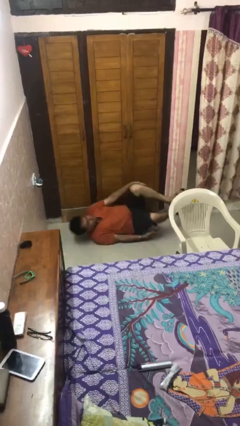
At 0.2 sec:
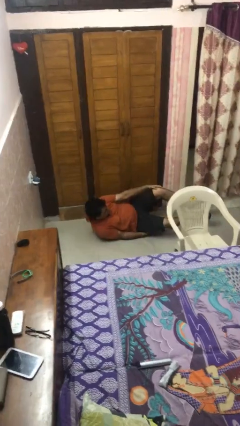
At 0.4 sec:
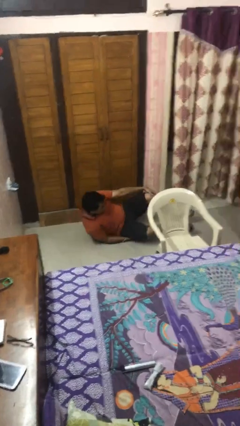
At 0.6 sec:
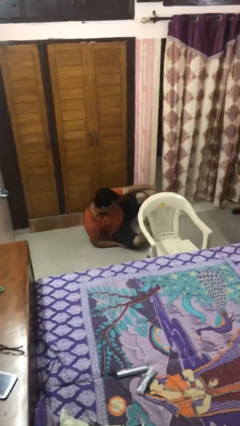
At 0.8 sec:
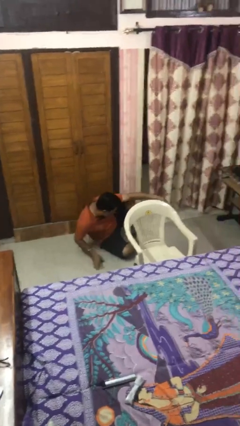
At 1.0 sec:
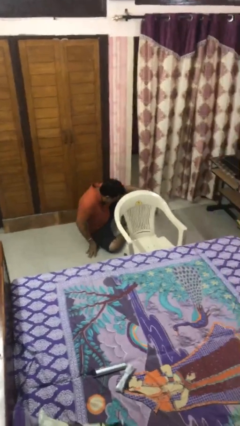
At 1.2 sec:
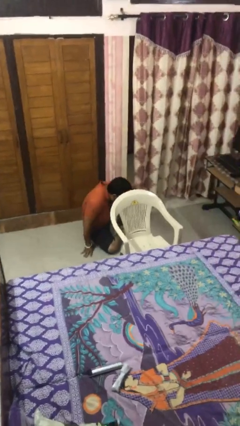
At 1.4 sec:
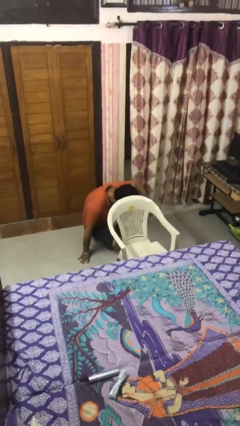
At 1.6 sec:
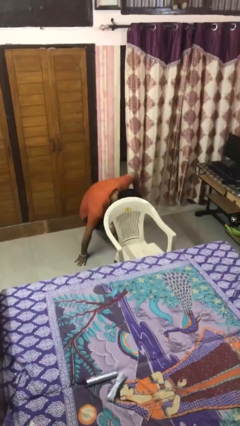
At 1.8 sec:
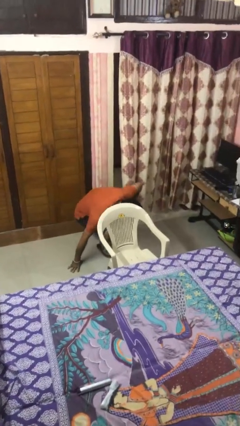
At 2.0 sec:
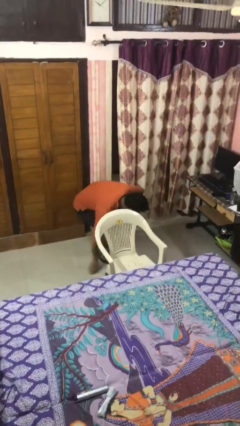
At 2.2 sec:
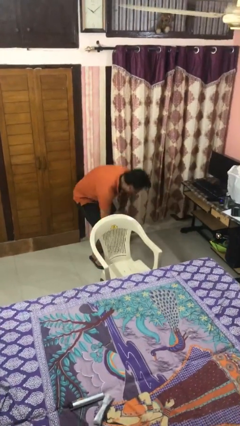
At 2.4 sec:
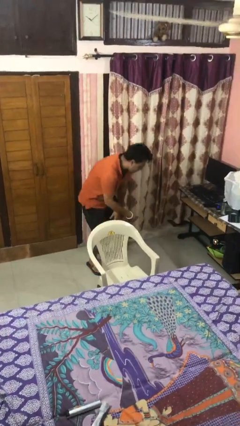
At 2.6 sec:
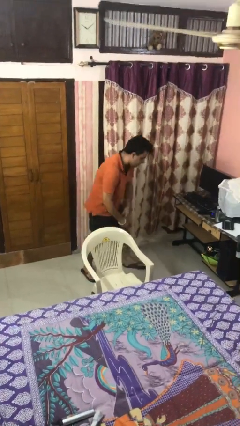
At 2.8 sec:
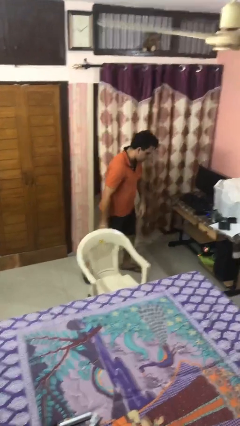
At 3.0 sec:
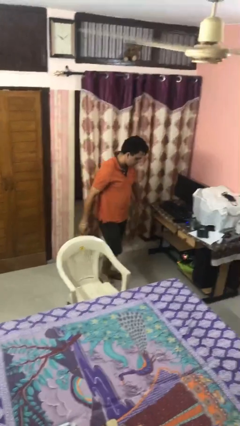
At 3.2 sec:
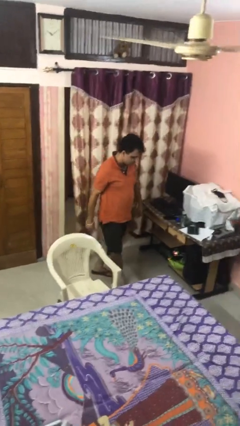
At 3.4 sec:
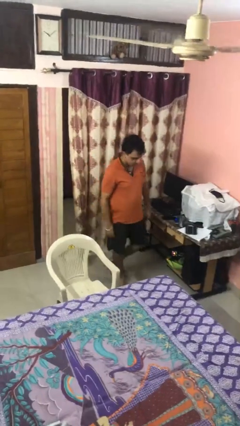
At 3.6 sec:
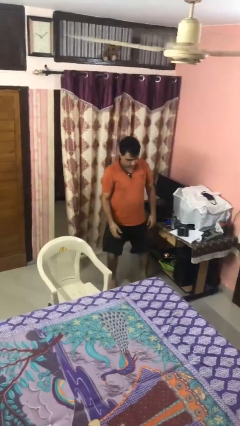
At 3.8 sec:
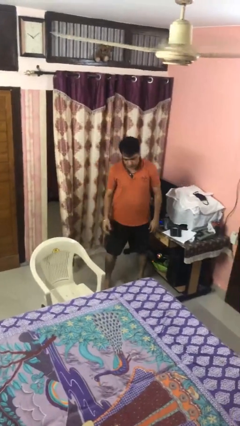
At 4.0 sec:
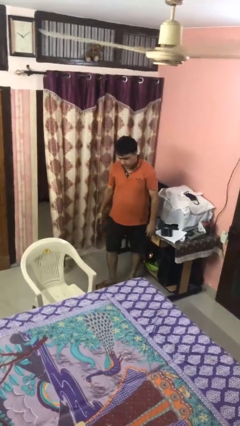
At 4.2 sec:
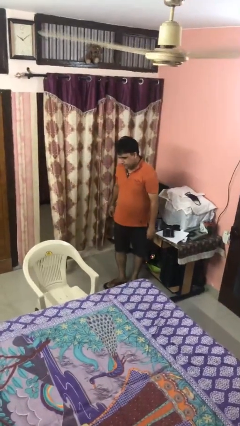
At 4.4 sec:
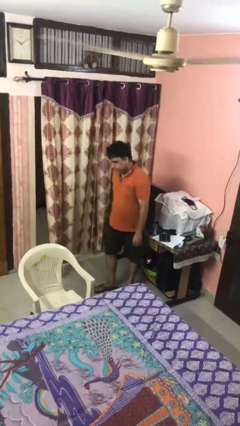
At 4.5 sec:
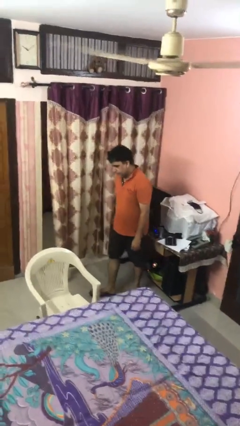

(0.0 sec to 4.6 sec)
person stands up from floor

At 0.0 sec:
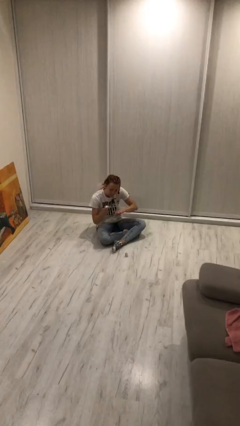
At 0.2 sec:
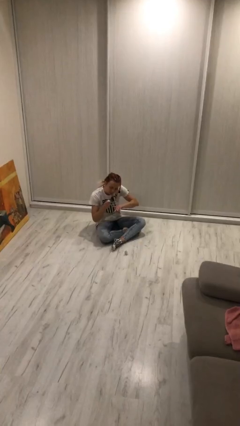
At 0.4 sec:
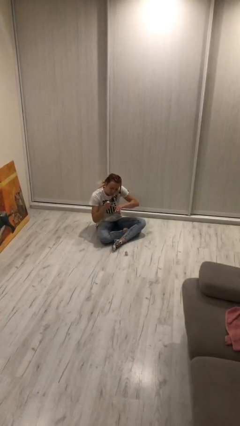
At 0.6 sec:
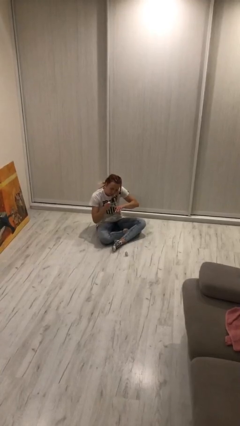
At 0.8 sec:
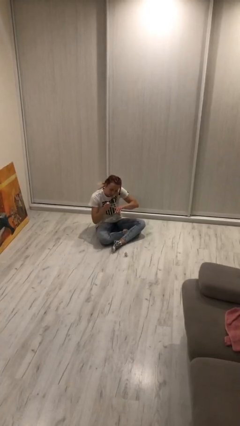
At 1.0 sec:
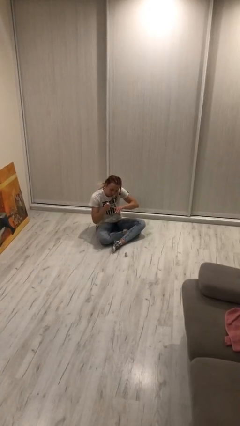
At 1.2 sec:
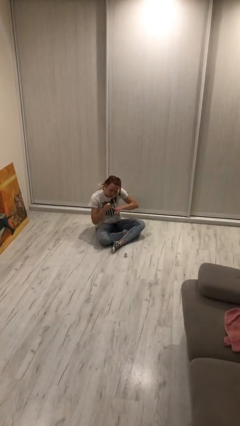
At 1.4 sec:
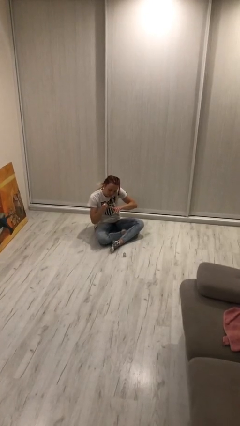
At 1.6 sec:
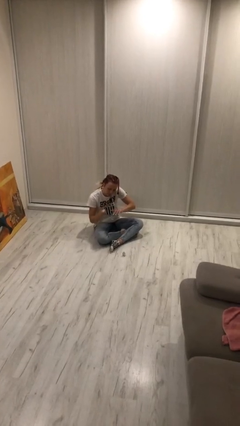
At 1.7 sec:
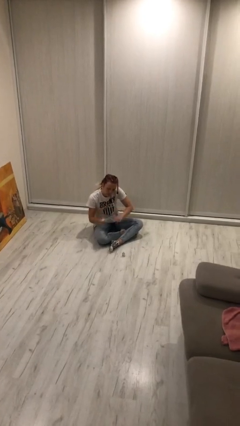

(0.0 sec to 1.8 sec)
person paints fingernails

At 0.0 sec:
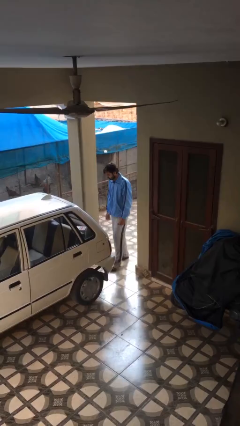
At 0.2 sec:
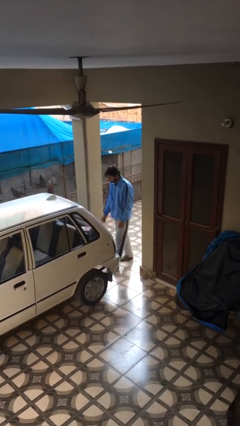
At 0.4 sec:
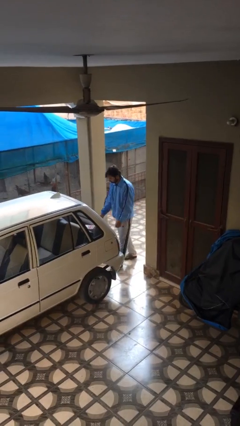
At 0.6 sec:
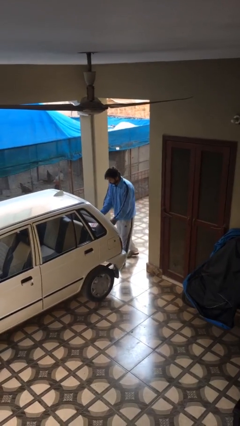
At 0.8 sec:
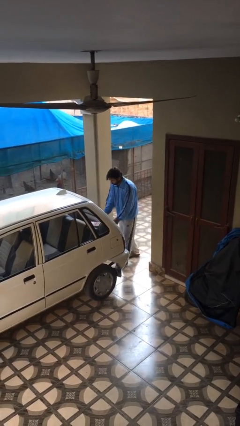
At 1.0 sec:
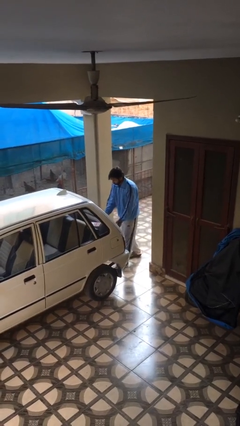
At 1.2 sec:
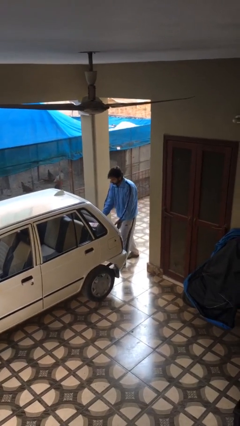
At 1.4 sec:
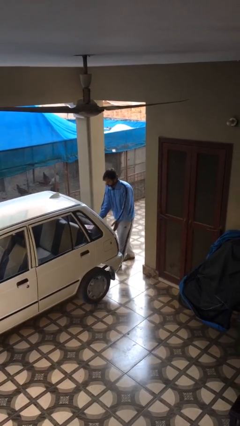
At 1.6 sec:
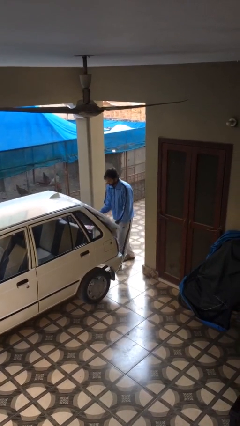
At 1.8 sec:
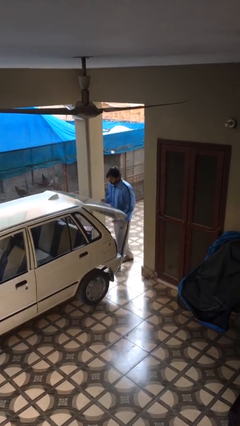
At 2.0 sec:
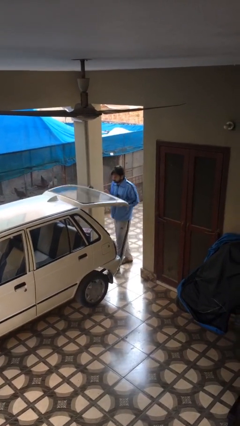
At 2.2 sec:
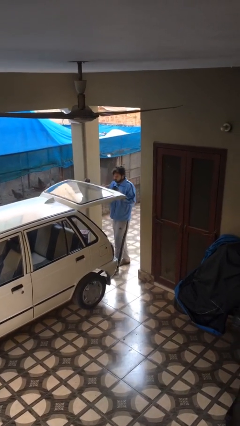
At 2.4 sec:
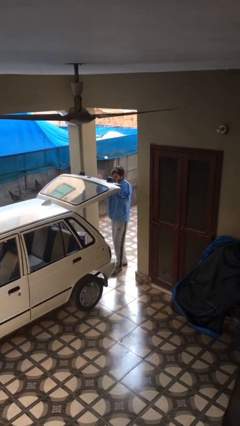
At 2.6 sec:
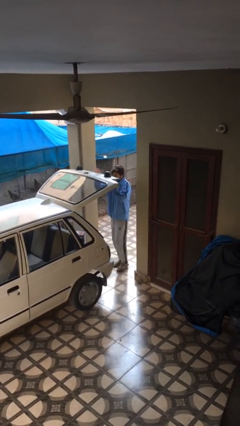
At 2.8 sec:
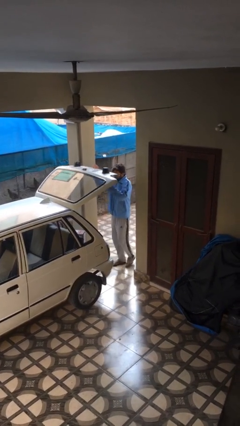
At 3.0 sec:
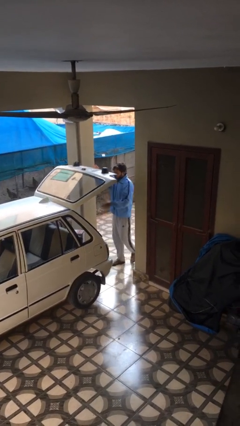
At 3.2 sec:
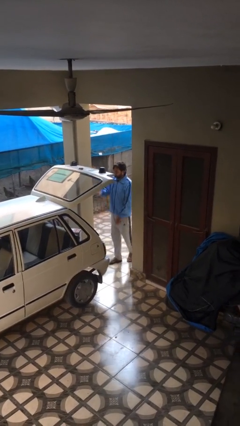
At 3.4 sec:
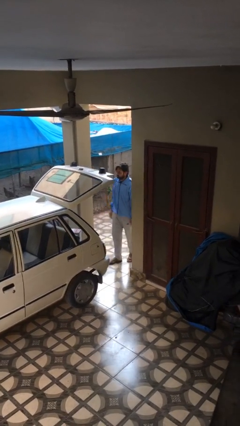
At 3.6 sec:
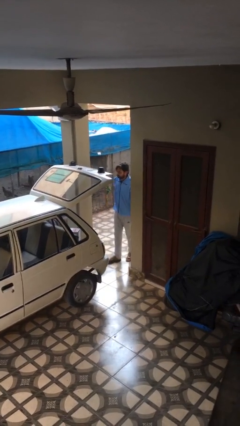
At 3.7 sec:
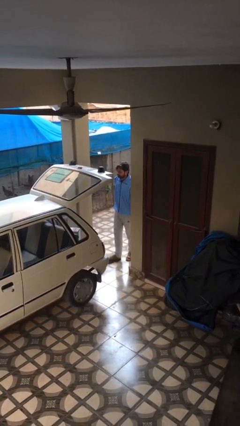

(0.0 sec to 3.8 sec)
person opens car trunk

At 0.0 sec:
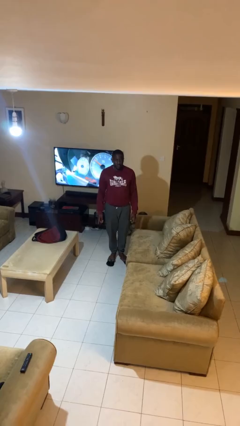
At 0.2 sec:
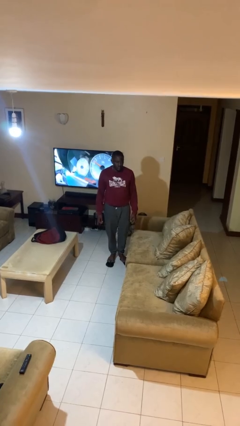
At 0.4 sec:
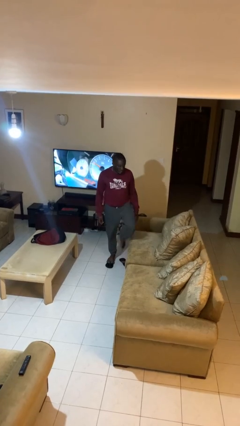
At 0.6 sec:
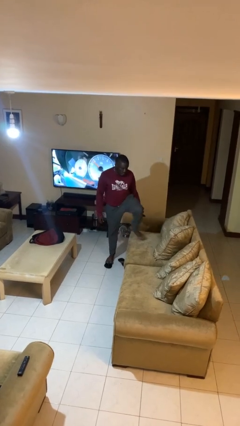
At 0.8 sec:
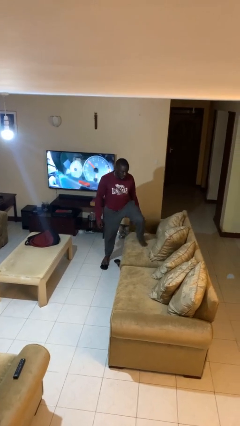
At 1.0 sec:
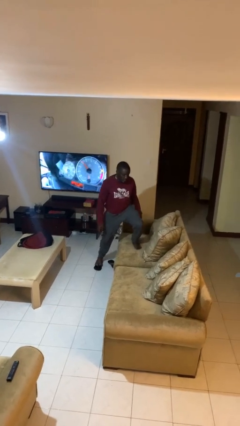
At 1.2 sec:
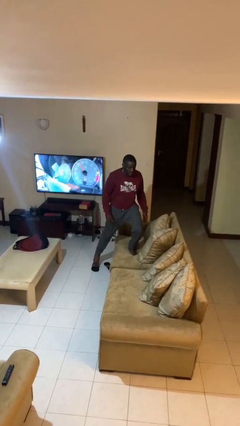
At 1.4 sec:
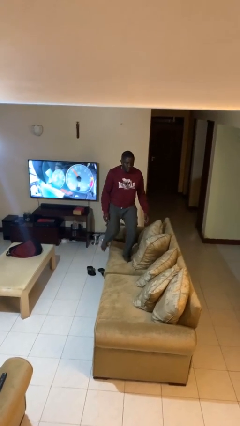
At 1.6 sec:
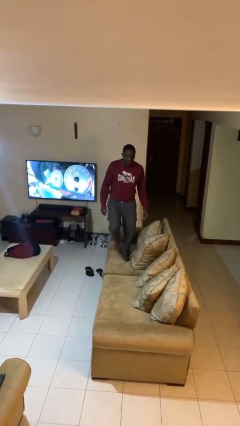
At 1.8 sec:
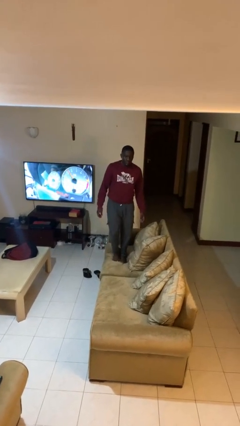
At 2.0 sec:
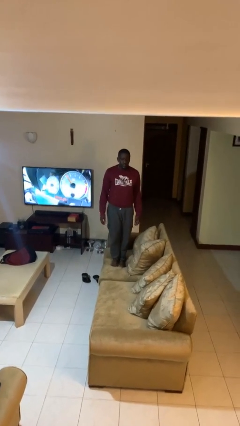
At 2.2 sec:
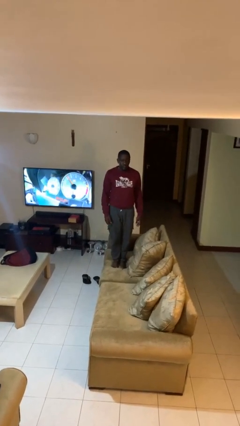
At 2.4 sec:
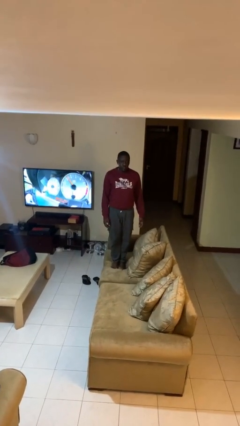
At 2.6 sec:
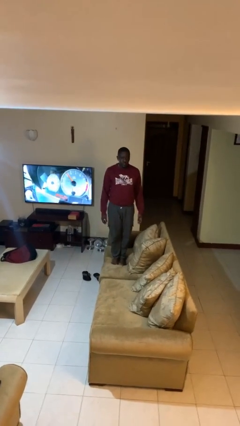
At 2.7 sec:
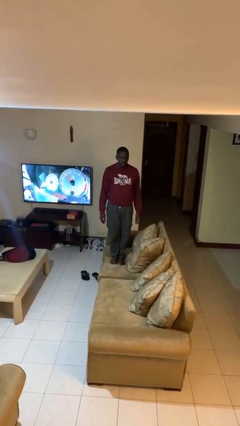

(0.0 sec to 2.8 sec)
person climbs on couch

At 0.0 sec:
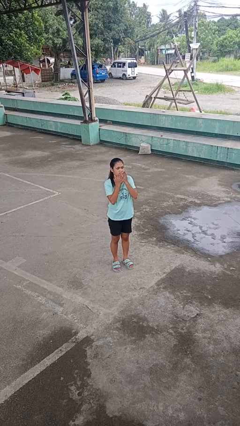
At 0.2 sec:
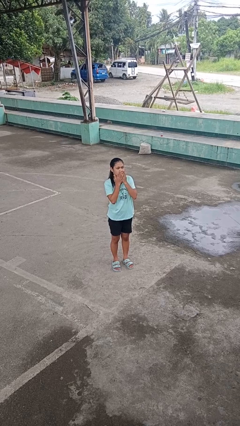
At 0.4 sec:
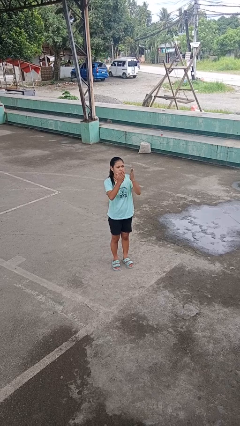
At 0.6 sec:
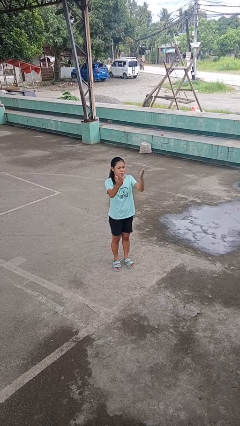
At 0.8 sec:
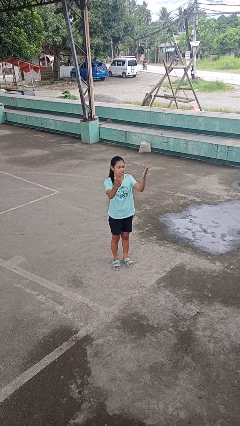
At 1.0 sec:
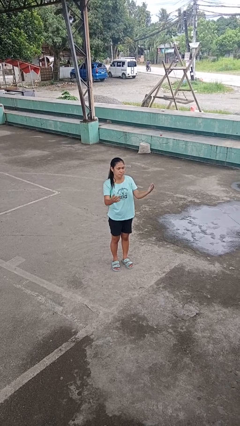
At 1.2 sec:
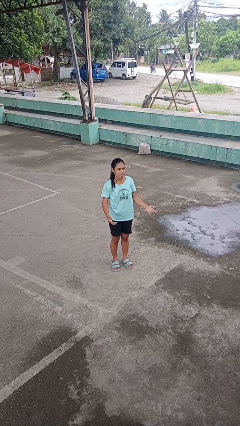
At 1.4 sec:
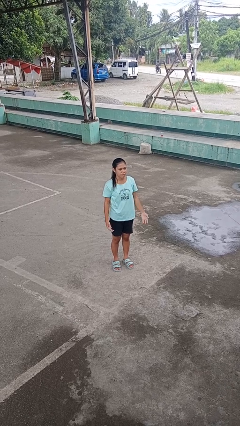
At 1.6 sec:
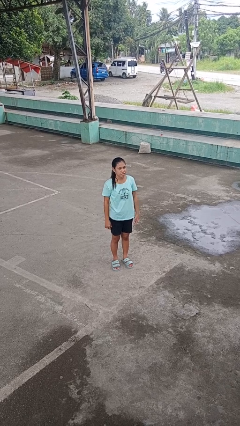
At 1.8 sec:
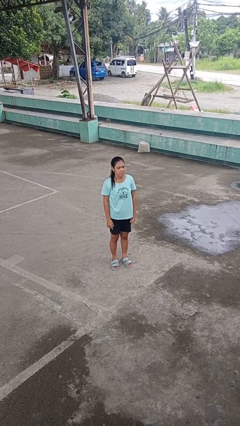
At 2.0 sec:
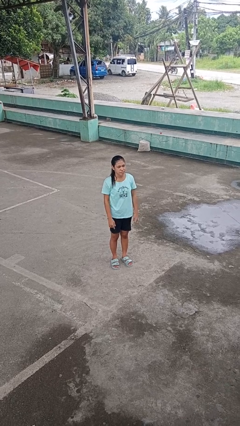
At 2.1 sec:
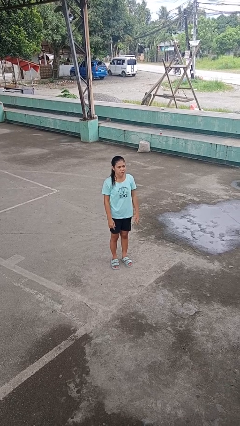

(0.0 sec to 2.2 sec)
person gestures blow kiss

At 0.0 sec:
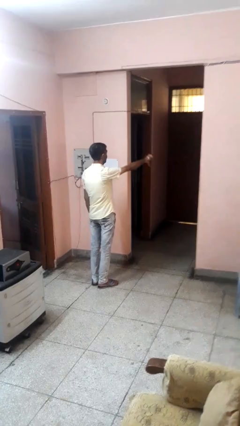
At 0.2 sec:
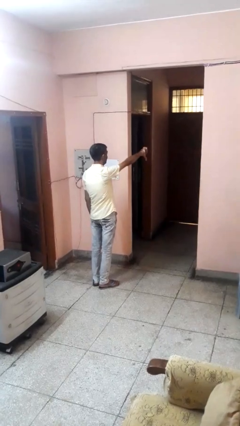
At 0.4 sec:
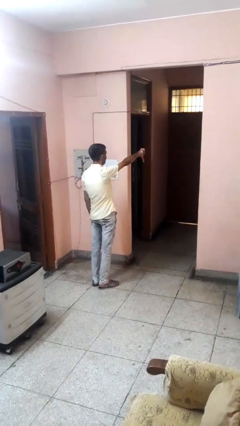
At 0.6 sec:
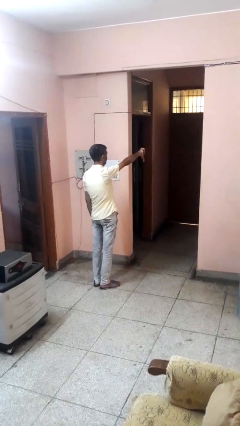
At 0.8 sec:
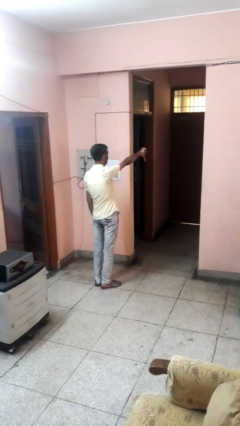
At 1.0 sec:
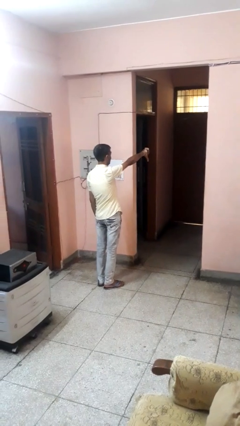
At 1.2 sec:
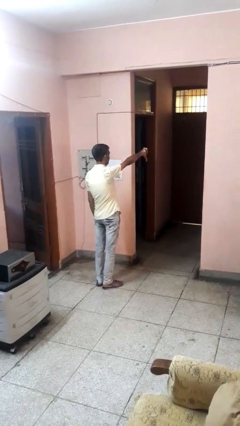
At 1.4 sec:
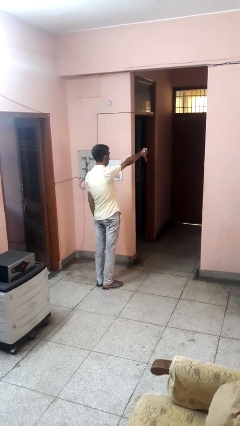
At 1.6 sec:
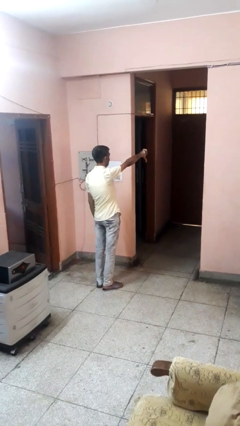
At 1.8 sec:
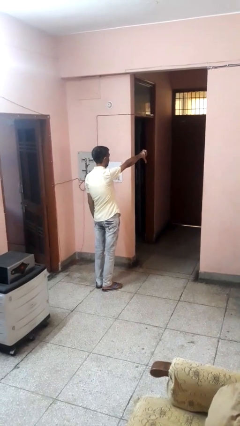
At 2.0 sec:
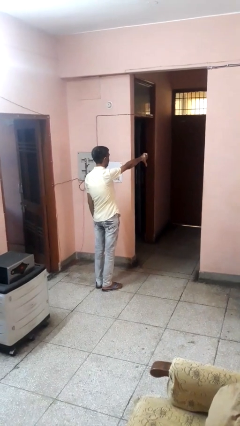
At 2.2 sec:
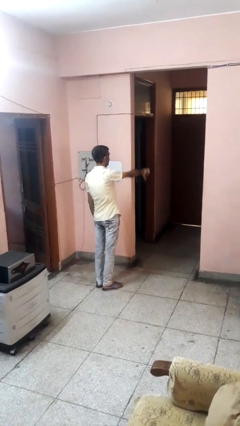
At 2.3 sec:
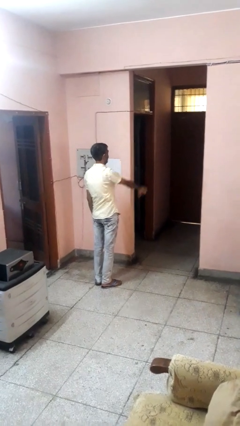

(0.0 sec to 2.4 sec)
person gestures thumbs down
